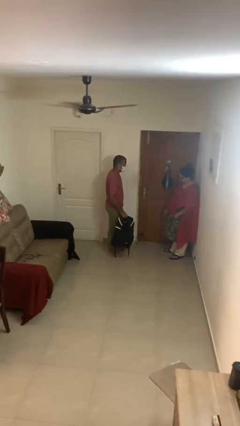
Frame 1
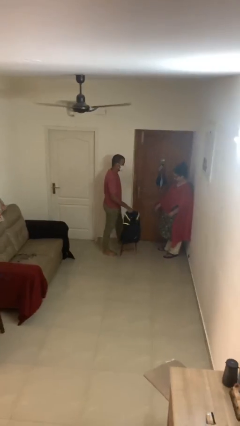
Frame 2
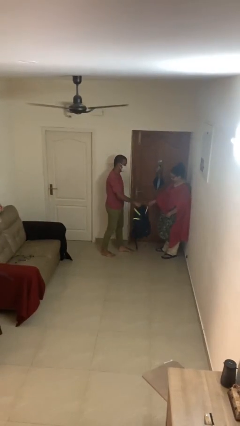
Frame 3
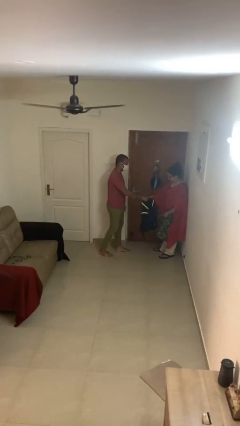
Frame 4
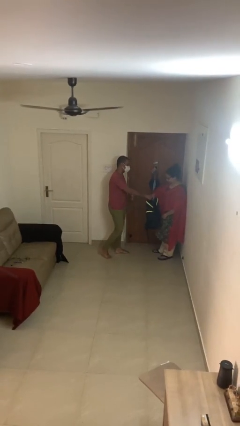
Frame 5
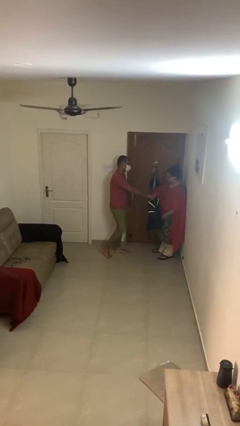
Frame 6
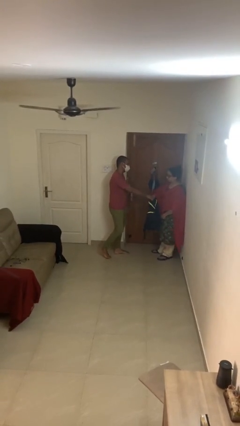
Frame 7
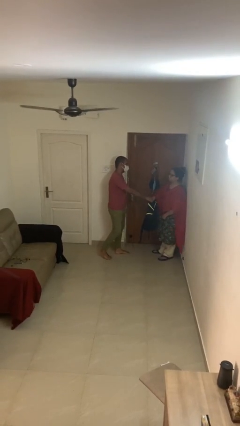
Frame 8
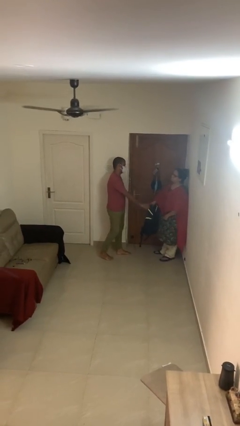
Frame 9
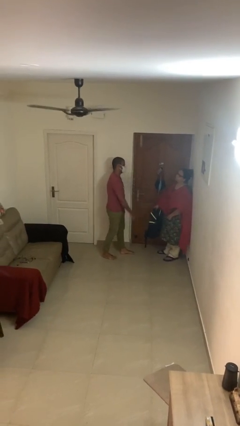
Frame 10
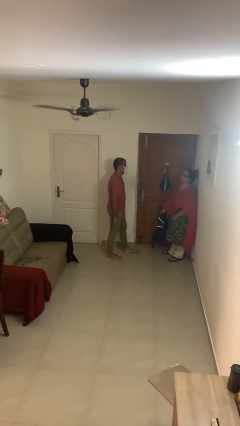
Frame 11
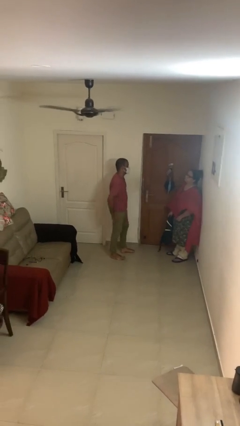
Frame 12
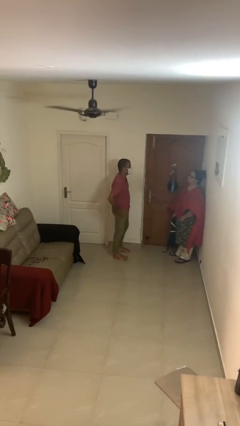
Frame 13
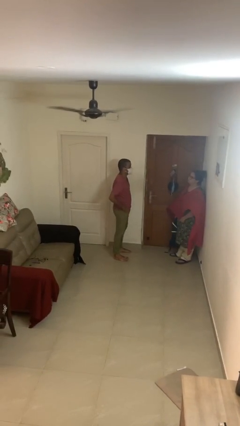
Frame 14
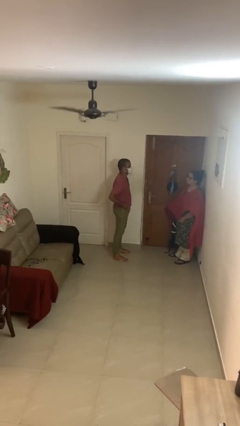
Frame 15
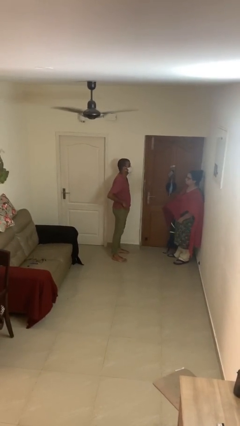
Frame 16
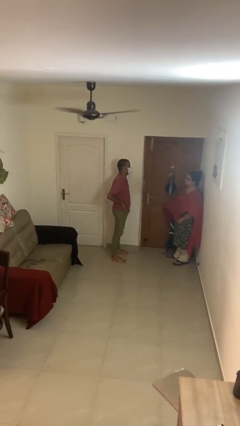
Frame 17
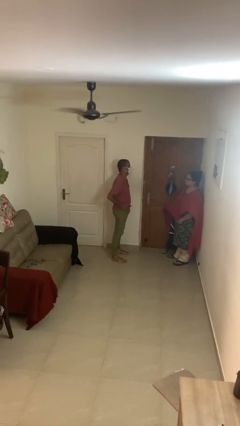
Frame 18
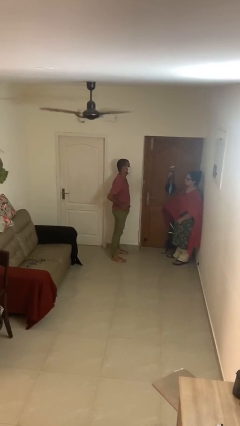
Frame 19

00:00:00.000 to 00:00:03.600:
person transfers object to person

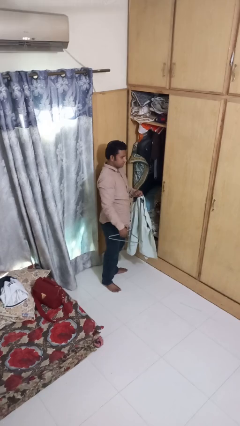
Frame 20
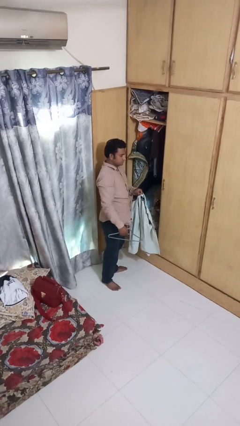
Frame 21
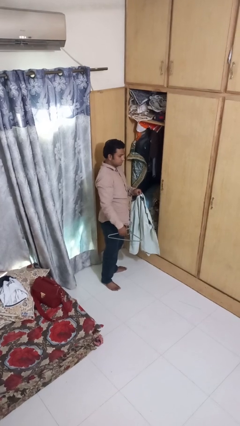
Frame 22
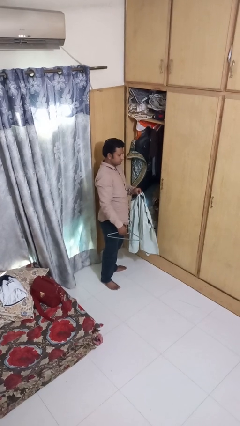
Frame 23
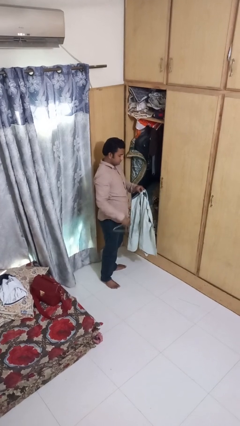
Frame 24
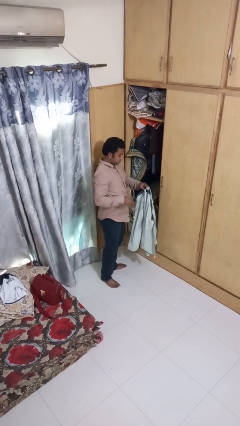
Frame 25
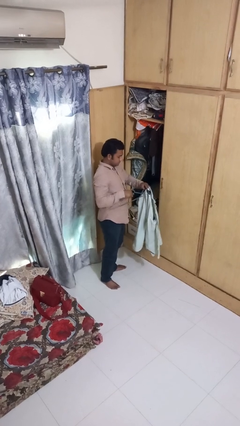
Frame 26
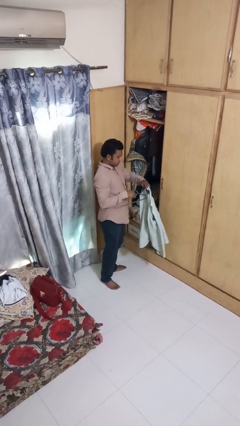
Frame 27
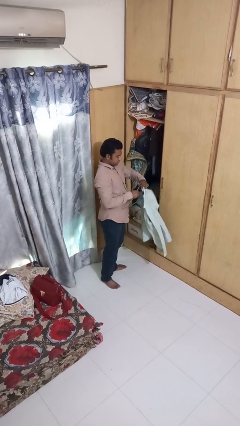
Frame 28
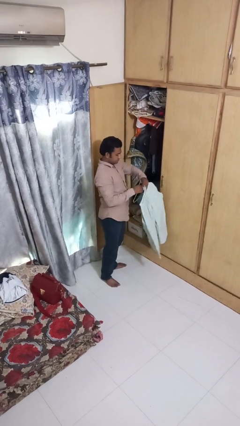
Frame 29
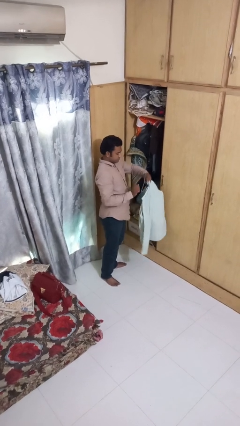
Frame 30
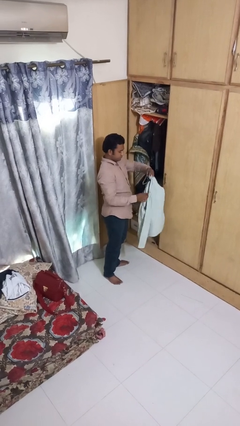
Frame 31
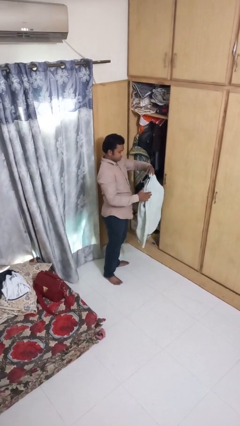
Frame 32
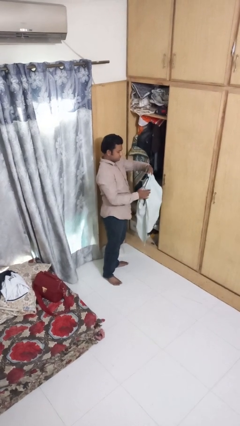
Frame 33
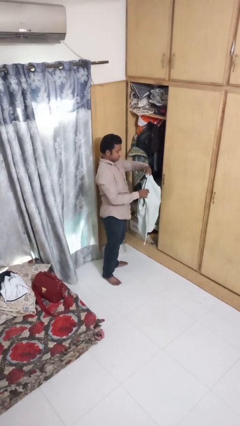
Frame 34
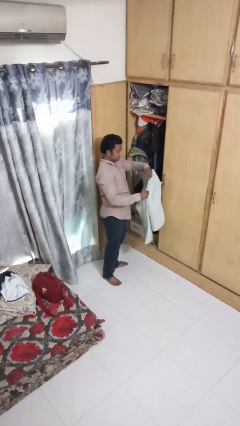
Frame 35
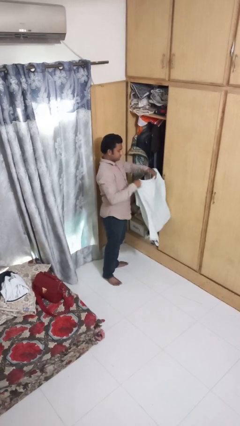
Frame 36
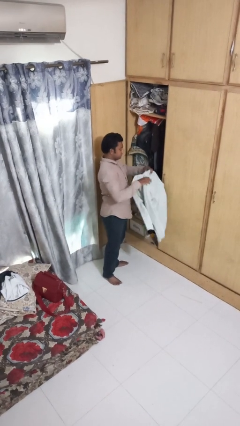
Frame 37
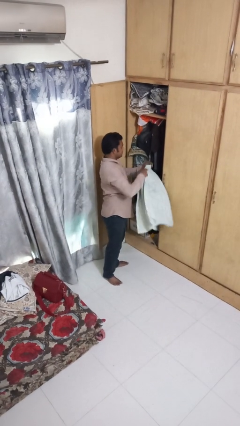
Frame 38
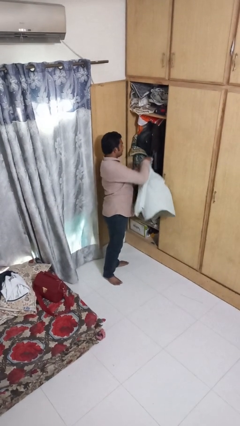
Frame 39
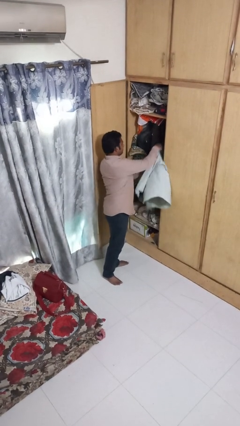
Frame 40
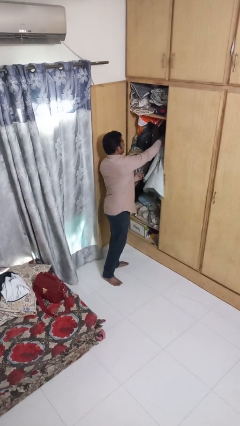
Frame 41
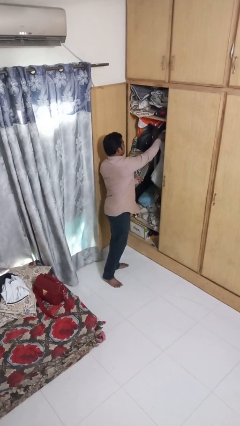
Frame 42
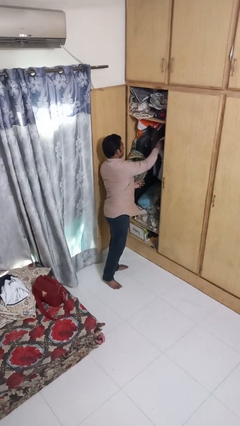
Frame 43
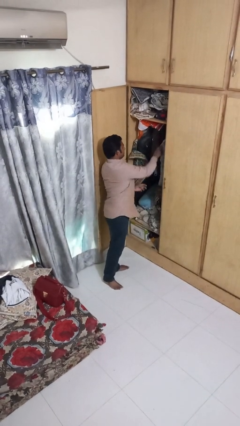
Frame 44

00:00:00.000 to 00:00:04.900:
person puts clothes into closet

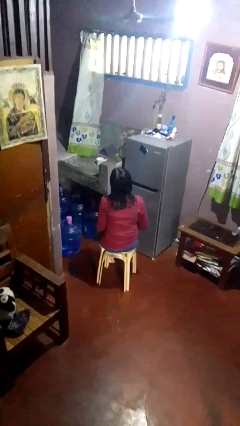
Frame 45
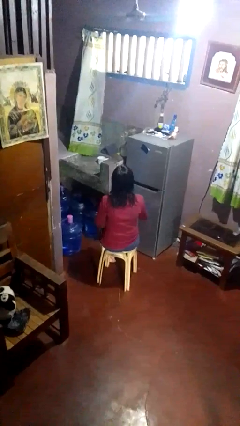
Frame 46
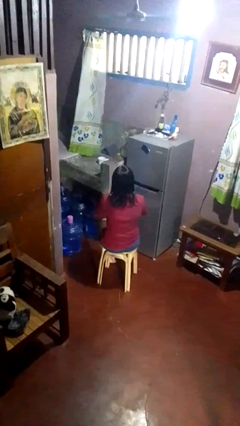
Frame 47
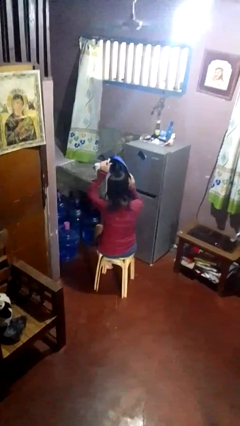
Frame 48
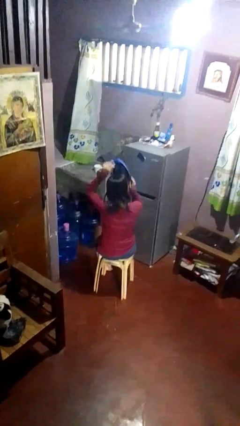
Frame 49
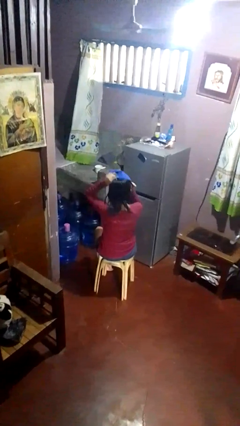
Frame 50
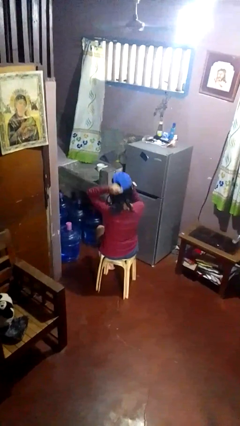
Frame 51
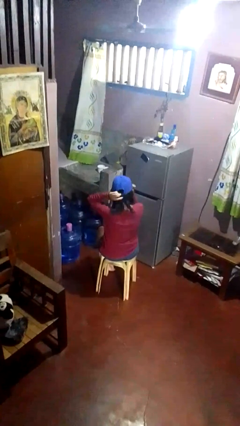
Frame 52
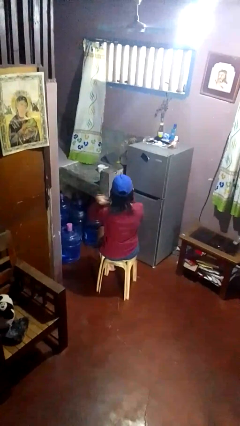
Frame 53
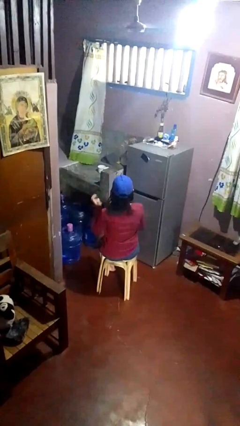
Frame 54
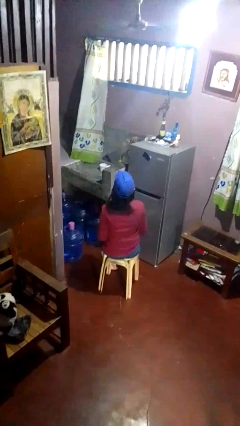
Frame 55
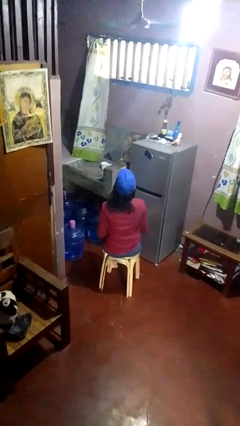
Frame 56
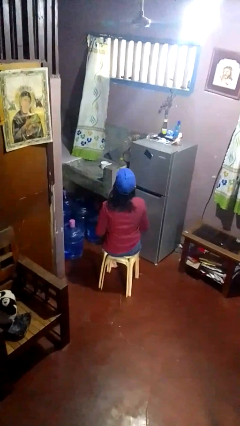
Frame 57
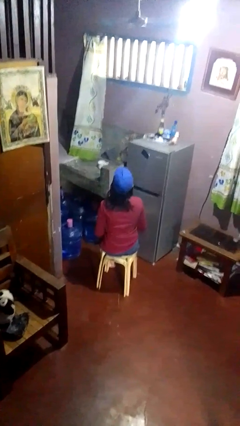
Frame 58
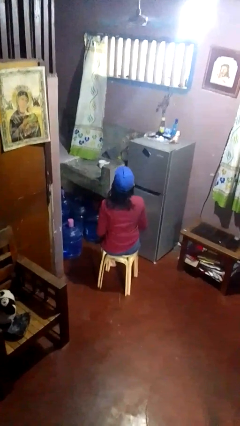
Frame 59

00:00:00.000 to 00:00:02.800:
person puts on hat

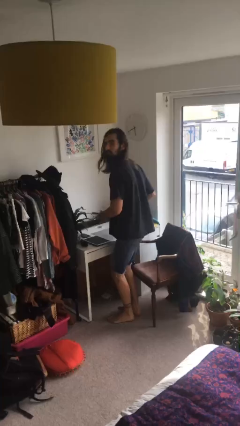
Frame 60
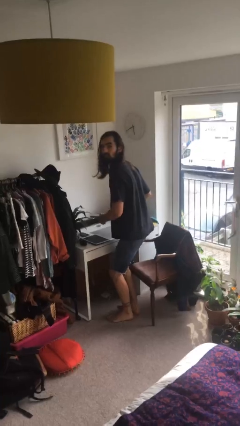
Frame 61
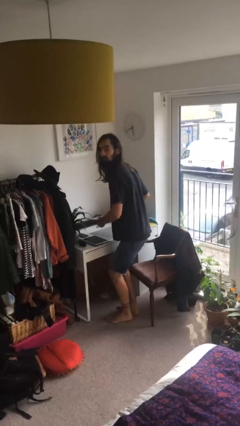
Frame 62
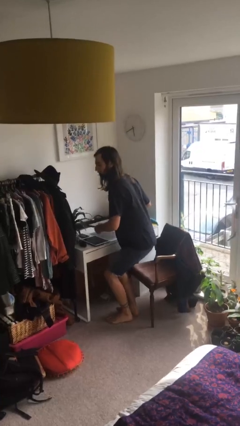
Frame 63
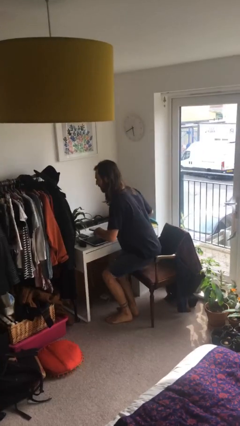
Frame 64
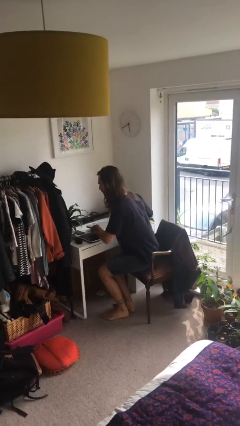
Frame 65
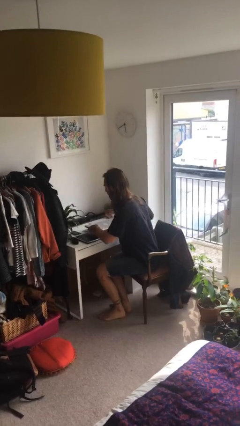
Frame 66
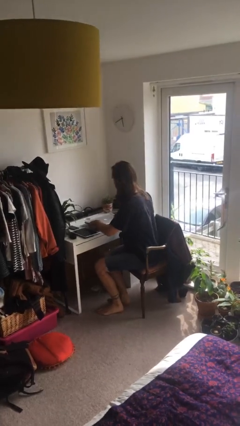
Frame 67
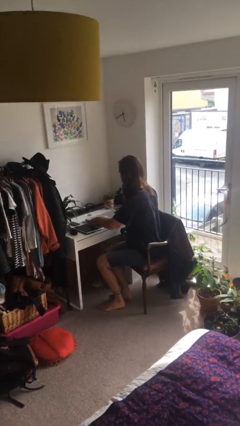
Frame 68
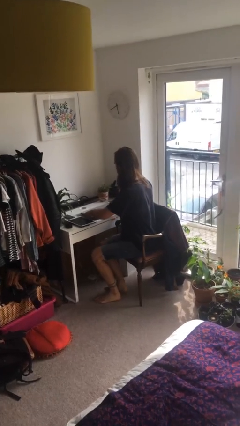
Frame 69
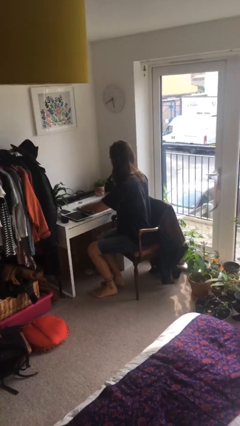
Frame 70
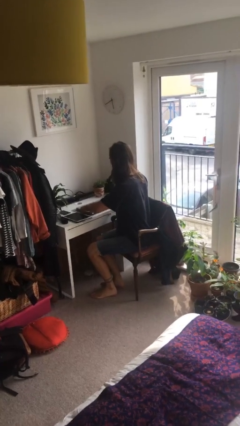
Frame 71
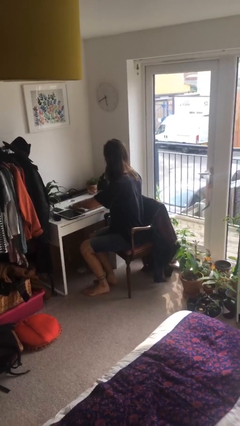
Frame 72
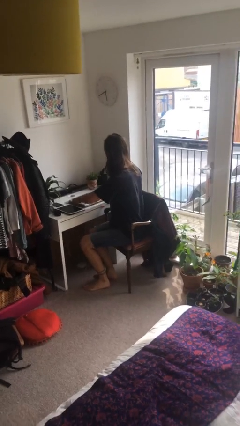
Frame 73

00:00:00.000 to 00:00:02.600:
person sits down

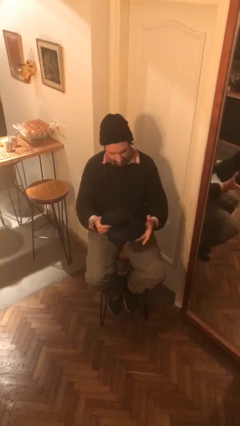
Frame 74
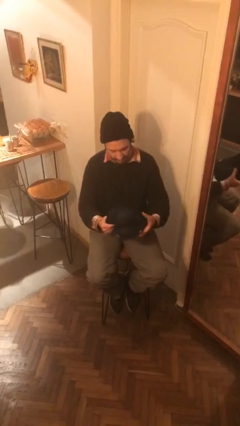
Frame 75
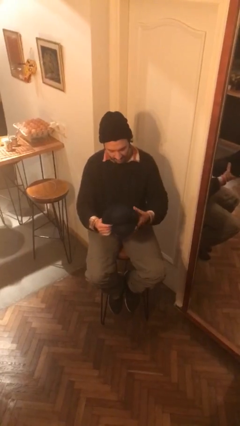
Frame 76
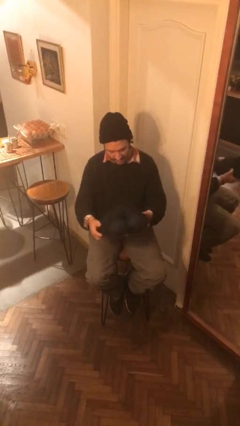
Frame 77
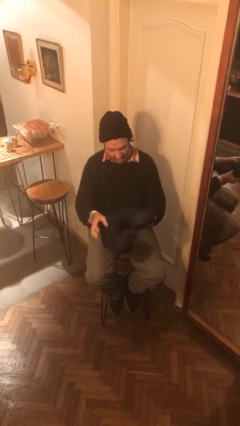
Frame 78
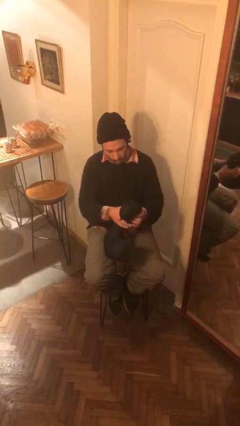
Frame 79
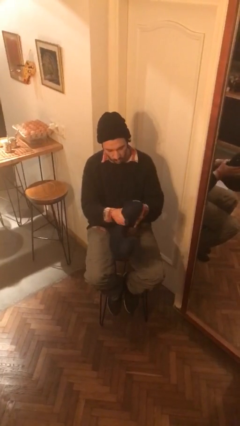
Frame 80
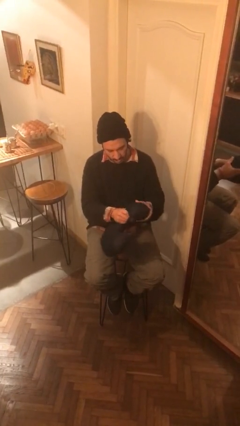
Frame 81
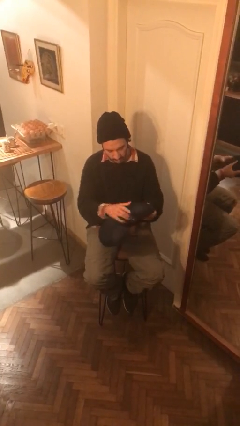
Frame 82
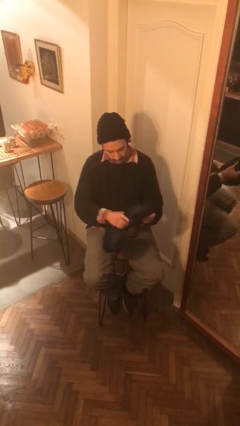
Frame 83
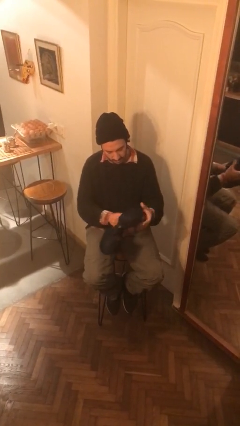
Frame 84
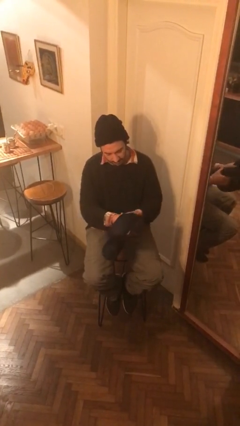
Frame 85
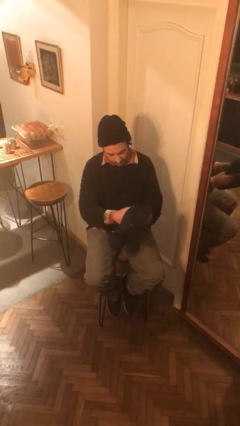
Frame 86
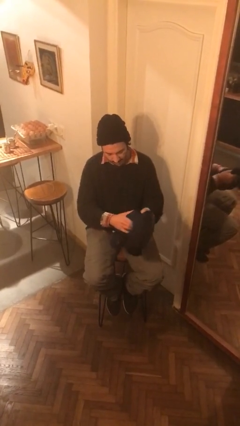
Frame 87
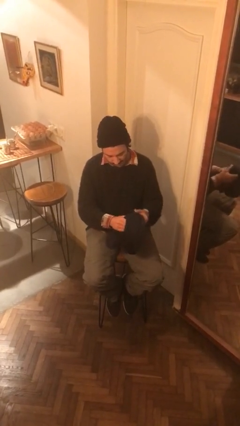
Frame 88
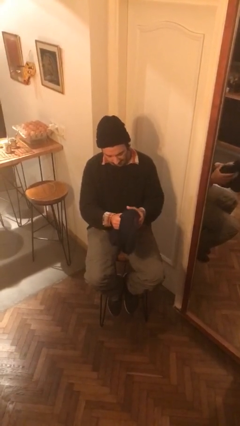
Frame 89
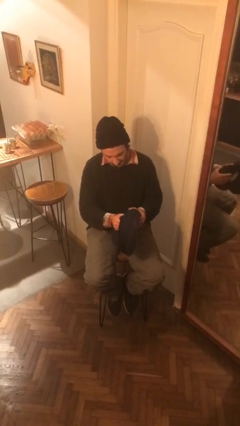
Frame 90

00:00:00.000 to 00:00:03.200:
person squeezes object

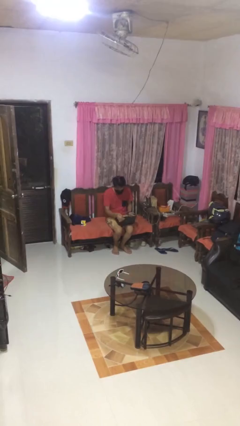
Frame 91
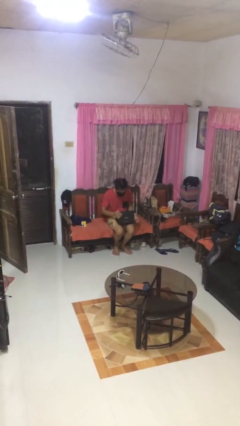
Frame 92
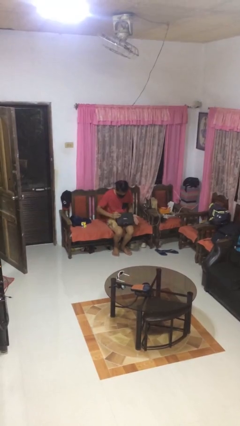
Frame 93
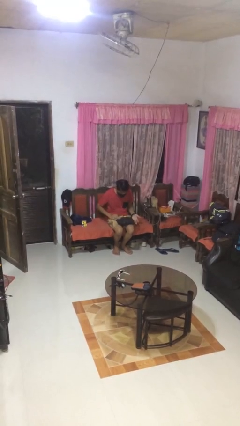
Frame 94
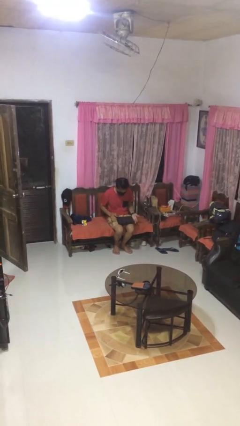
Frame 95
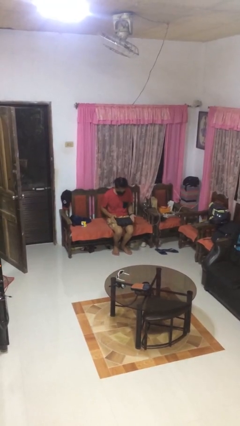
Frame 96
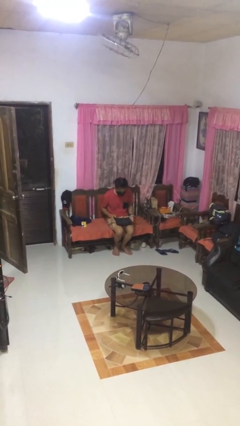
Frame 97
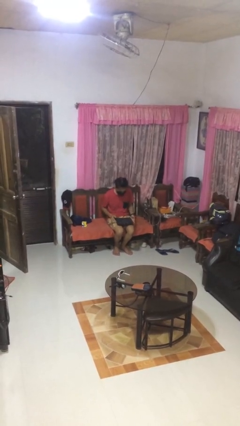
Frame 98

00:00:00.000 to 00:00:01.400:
person closes laptop
